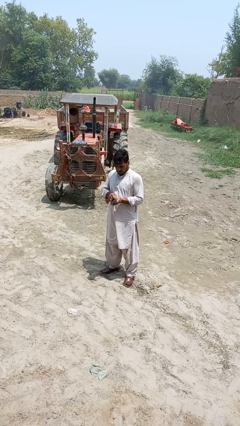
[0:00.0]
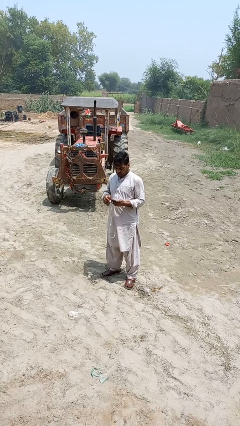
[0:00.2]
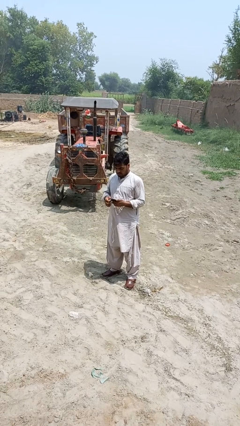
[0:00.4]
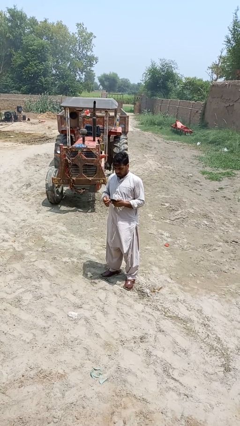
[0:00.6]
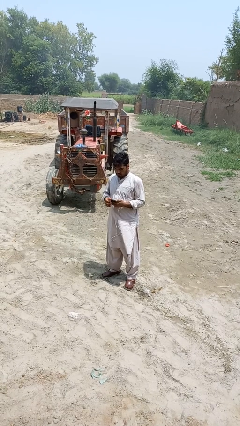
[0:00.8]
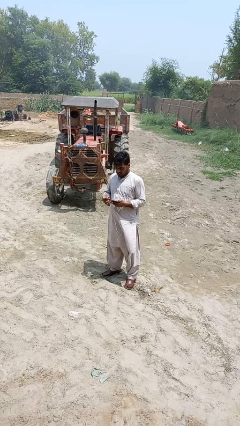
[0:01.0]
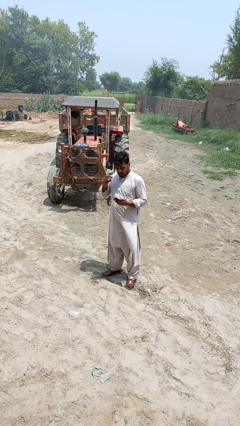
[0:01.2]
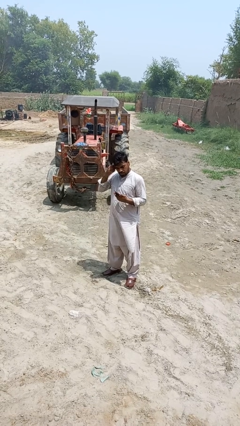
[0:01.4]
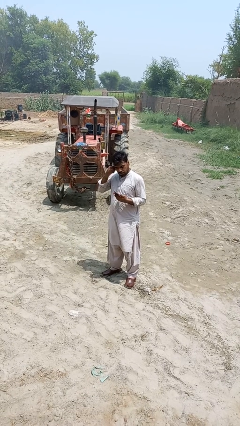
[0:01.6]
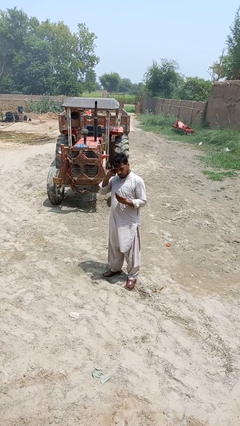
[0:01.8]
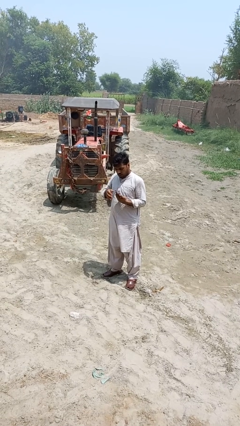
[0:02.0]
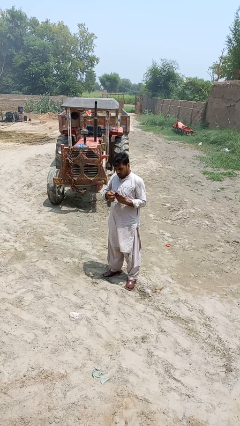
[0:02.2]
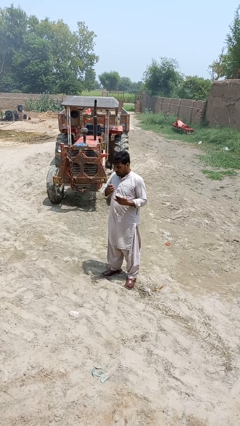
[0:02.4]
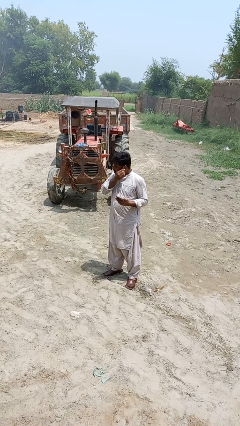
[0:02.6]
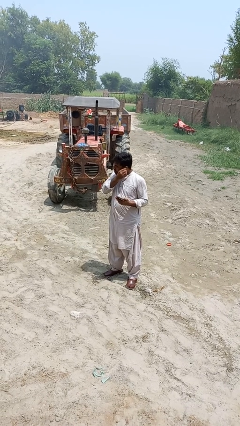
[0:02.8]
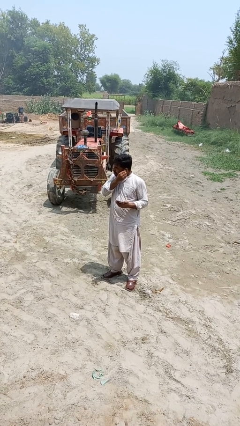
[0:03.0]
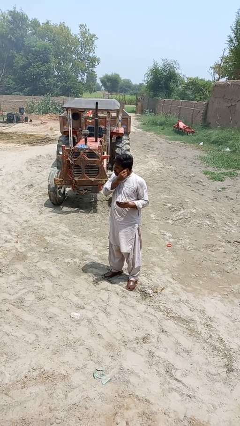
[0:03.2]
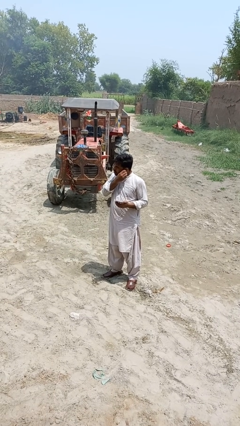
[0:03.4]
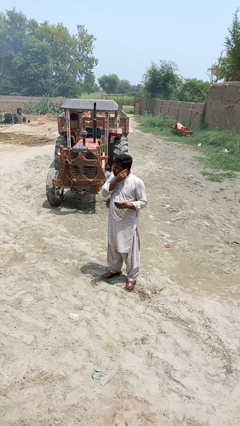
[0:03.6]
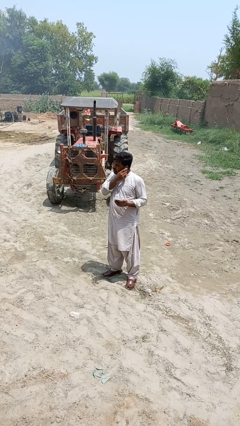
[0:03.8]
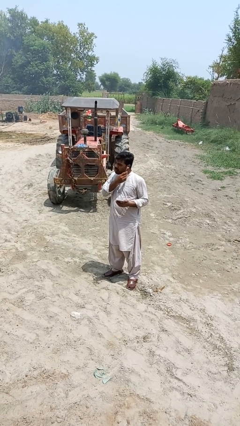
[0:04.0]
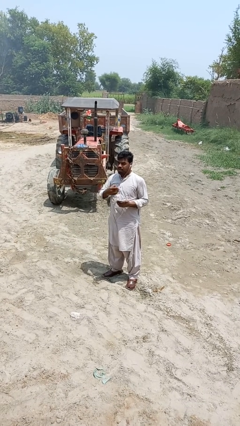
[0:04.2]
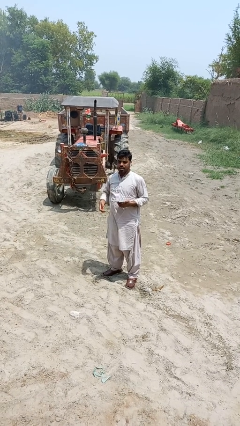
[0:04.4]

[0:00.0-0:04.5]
person puts on headphones

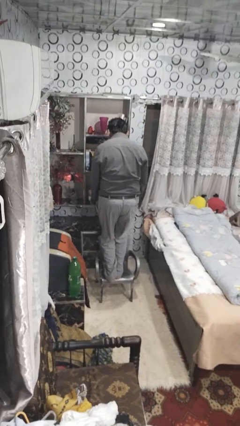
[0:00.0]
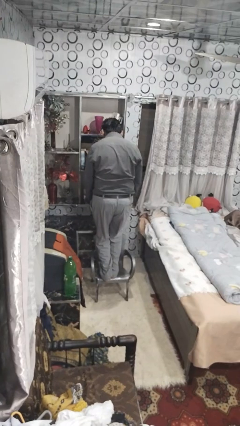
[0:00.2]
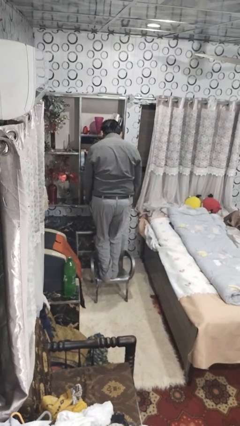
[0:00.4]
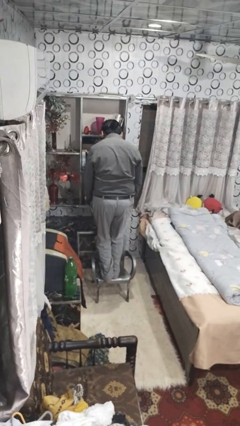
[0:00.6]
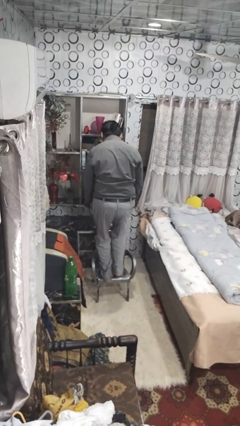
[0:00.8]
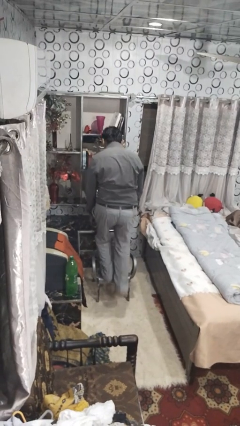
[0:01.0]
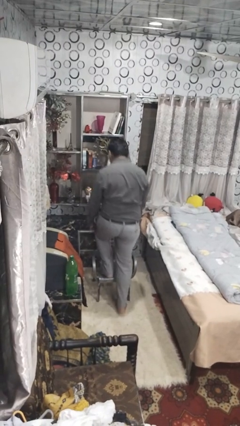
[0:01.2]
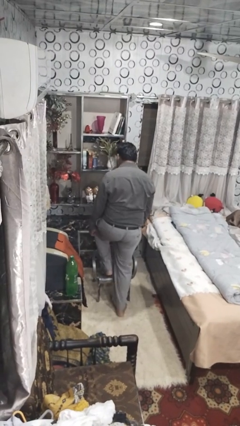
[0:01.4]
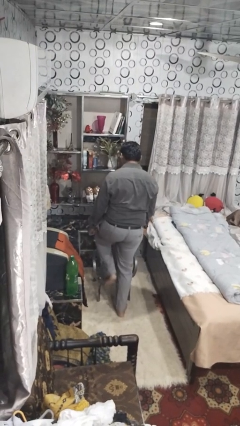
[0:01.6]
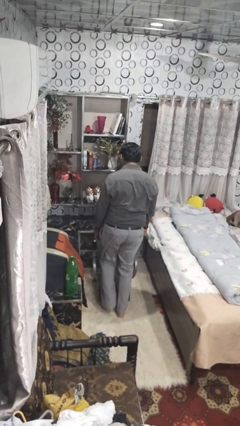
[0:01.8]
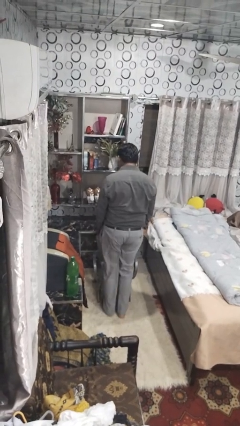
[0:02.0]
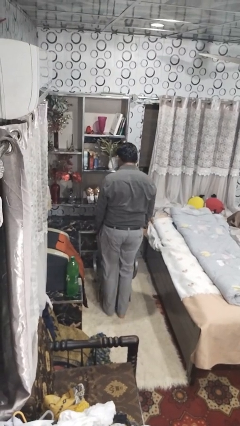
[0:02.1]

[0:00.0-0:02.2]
person climbs off chair

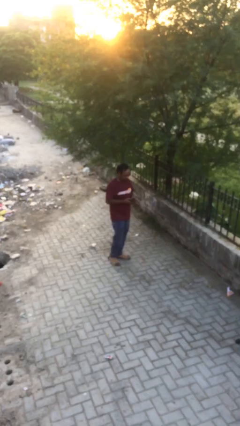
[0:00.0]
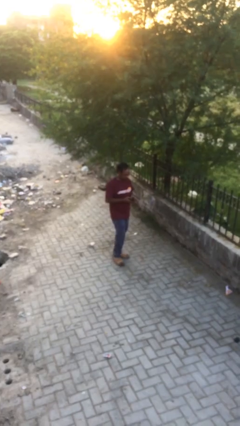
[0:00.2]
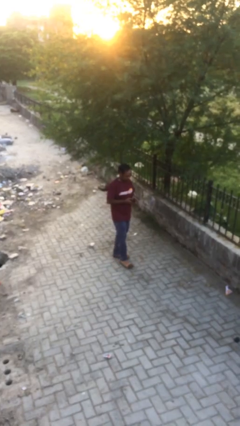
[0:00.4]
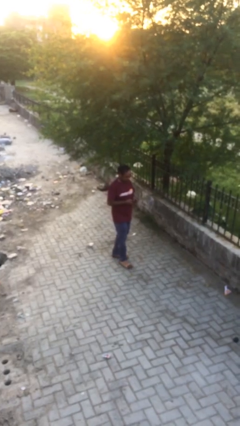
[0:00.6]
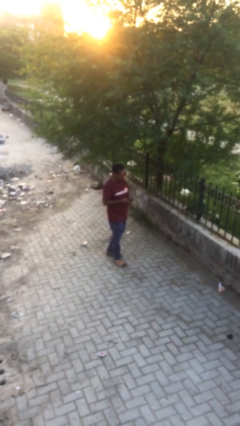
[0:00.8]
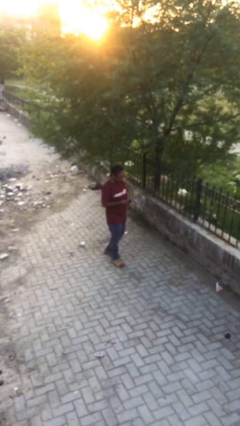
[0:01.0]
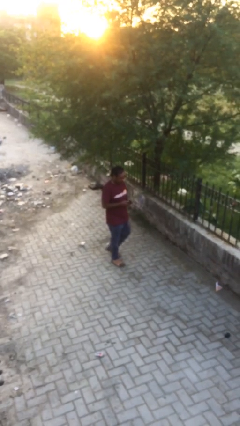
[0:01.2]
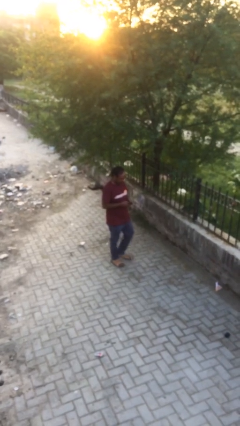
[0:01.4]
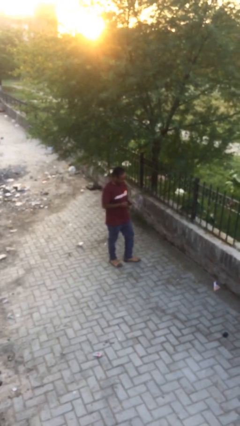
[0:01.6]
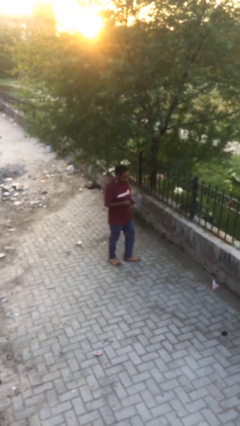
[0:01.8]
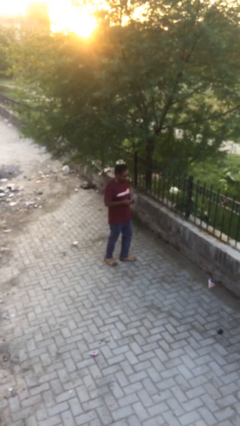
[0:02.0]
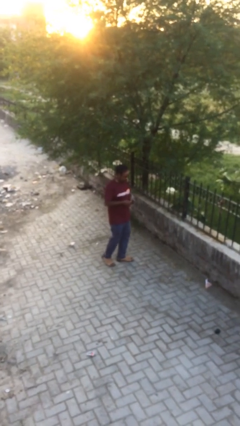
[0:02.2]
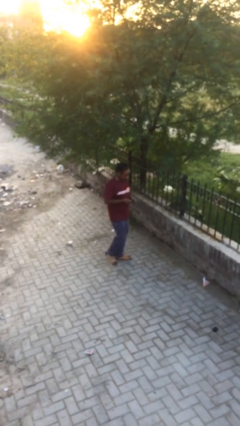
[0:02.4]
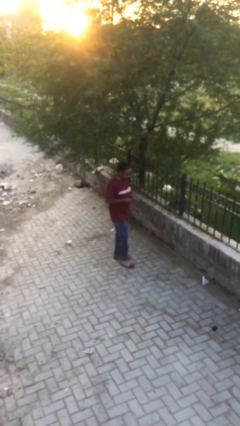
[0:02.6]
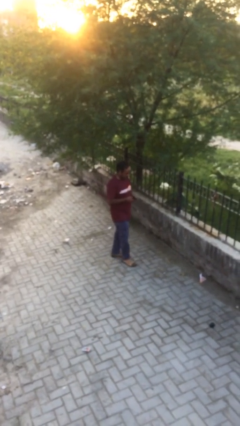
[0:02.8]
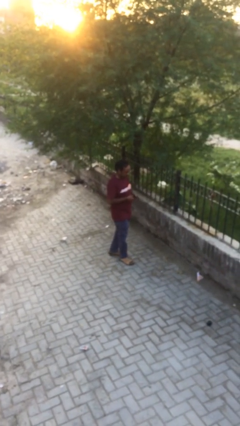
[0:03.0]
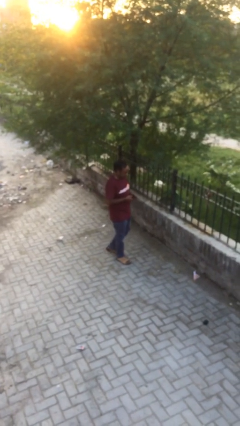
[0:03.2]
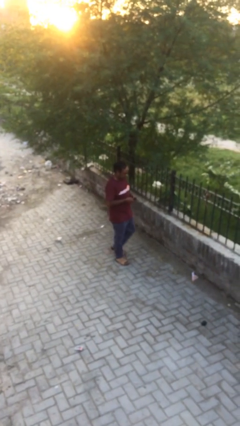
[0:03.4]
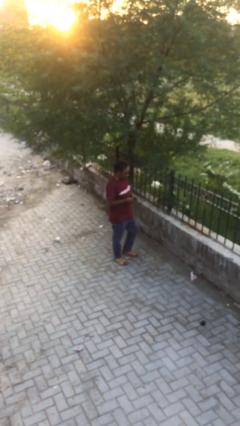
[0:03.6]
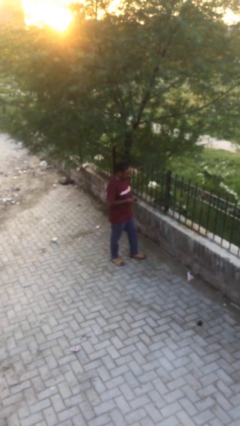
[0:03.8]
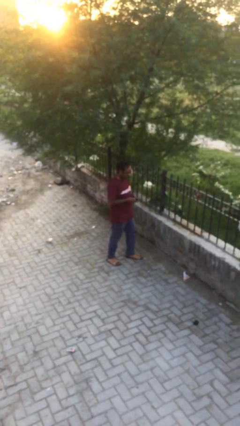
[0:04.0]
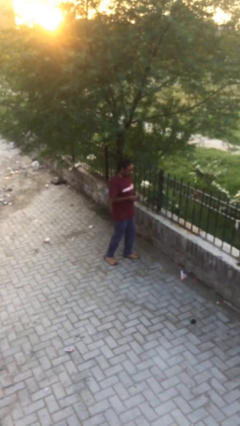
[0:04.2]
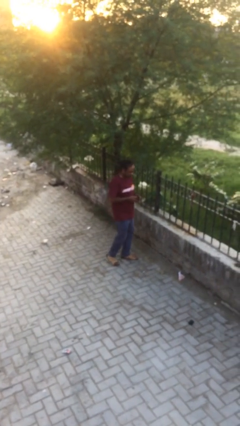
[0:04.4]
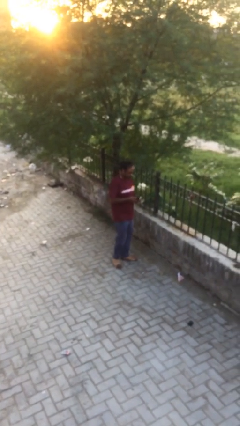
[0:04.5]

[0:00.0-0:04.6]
person texts on phone

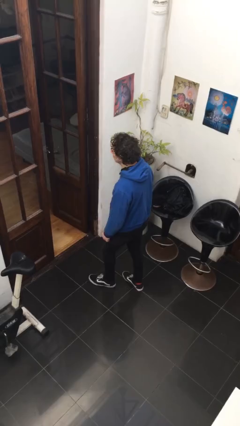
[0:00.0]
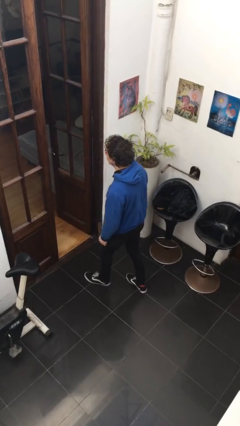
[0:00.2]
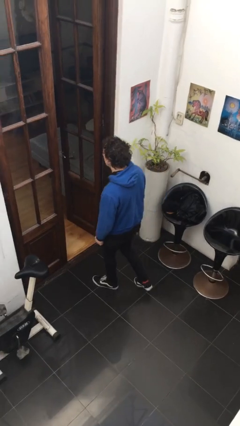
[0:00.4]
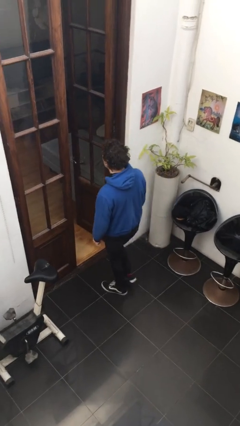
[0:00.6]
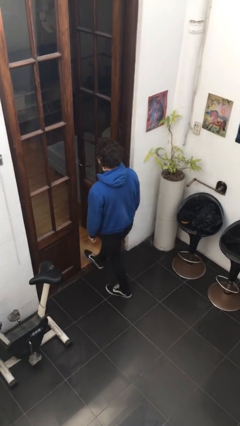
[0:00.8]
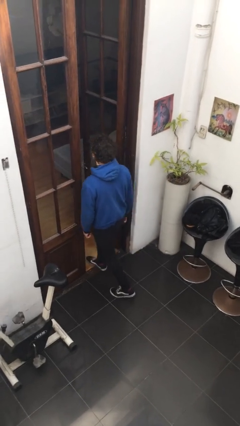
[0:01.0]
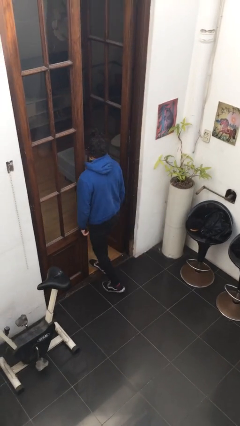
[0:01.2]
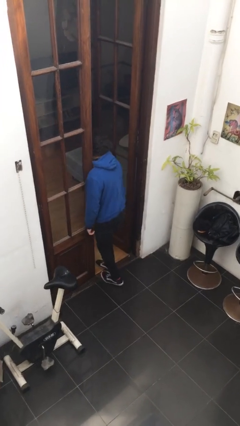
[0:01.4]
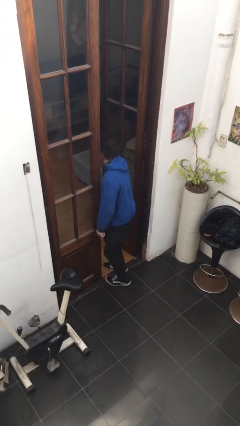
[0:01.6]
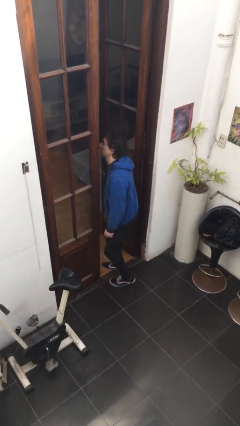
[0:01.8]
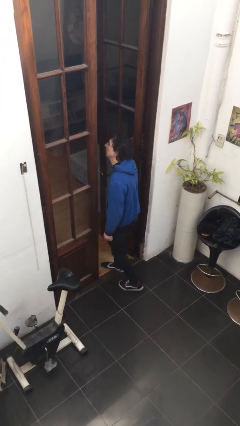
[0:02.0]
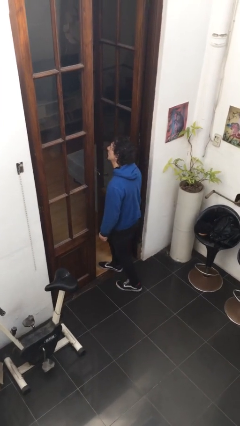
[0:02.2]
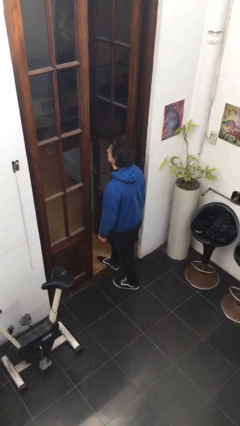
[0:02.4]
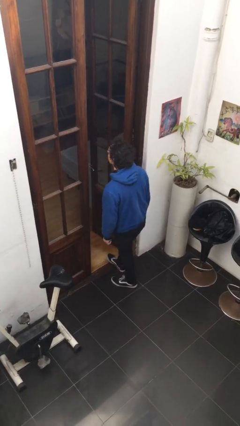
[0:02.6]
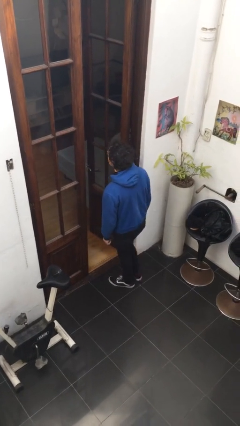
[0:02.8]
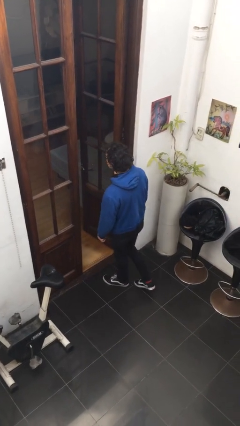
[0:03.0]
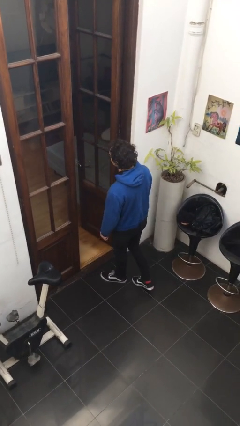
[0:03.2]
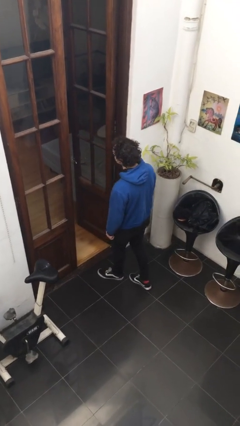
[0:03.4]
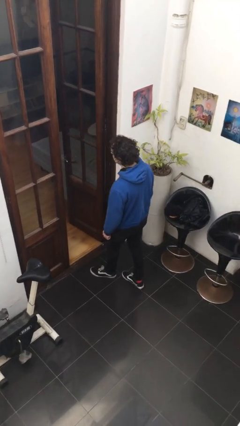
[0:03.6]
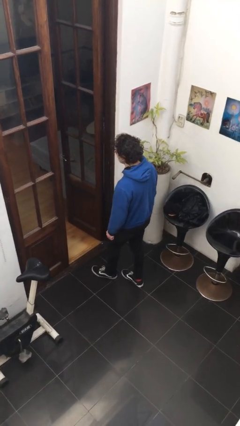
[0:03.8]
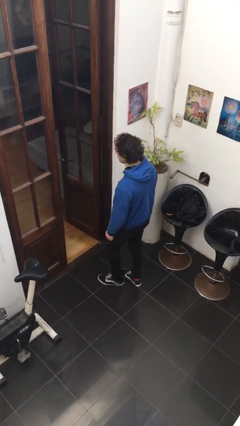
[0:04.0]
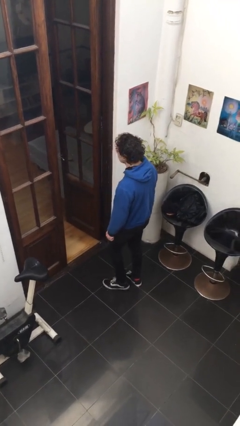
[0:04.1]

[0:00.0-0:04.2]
person bumps into wall

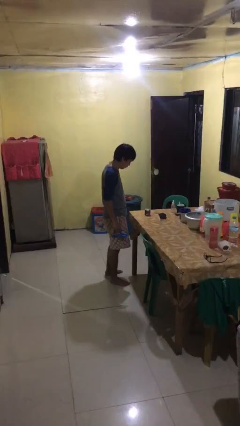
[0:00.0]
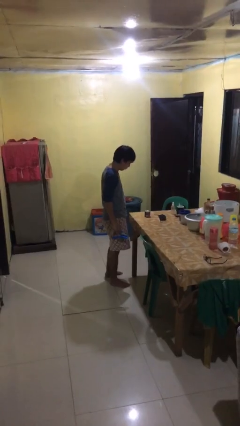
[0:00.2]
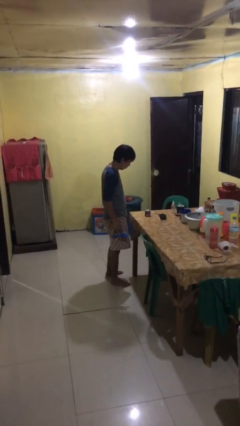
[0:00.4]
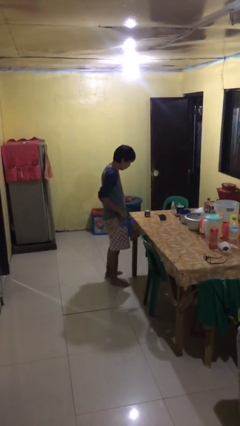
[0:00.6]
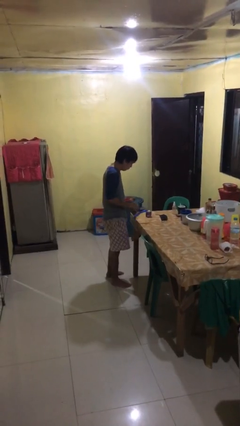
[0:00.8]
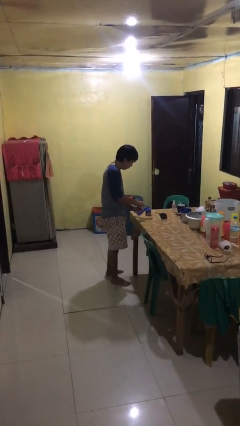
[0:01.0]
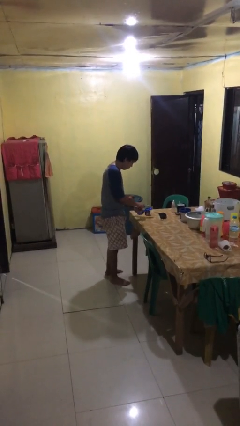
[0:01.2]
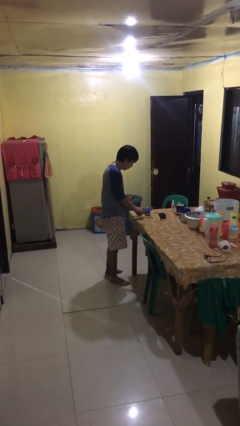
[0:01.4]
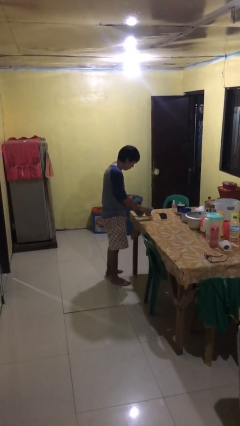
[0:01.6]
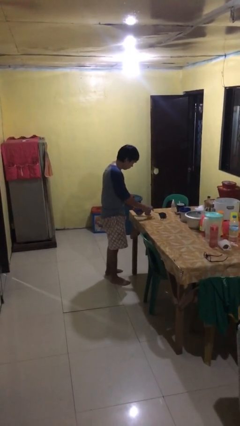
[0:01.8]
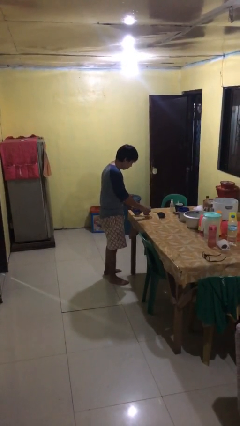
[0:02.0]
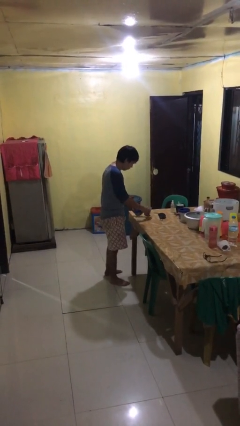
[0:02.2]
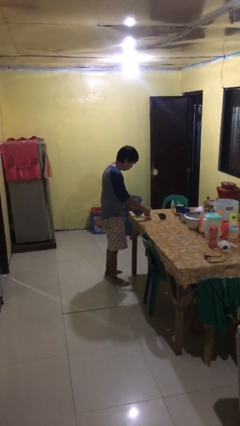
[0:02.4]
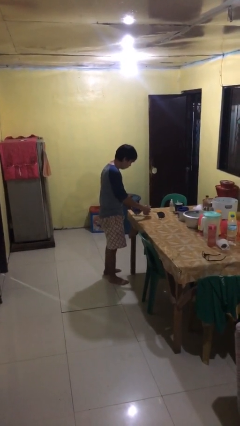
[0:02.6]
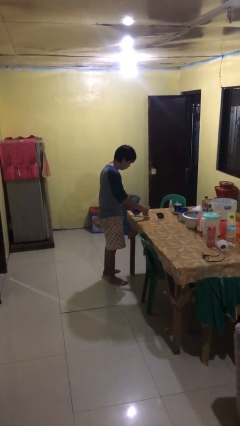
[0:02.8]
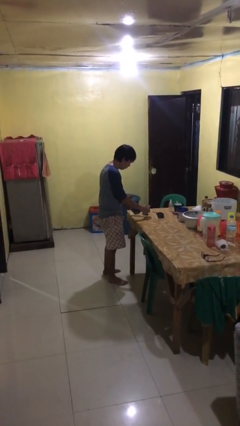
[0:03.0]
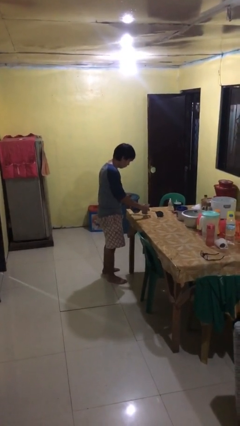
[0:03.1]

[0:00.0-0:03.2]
person opens can with can opener
